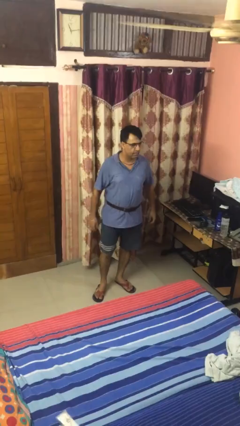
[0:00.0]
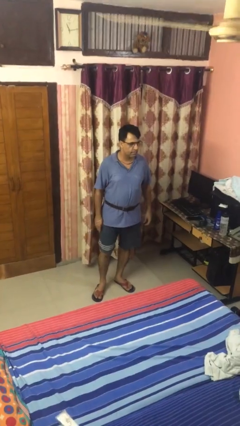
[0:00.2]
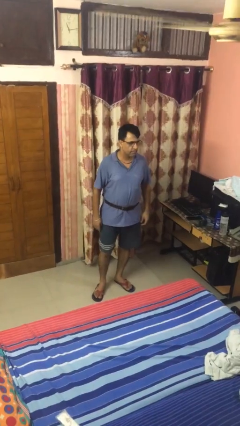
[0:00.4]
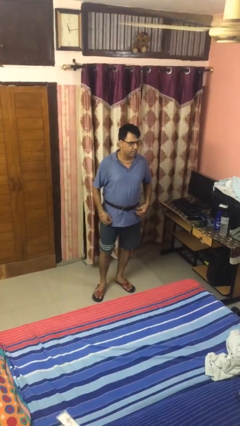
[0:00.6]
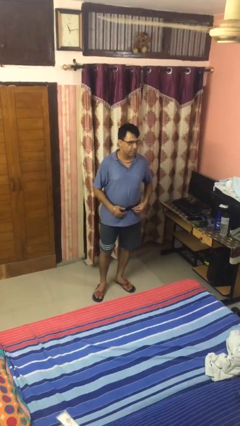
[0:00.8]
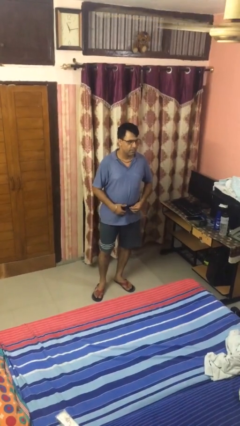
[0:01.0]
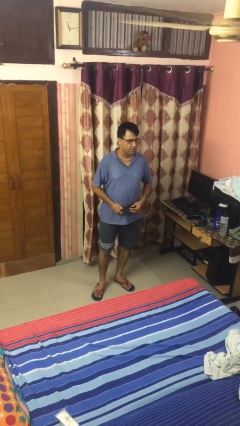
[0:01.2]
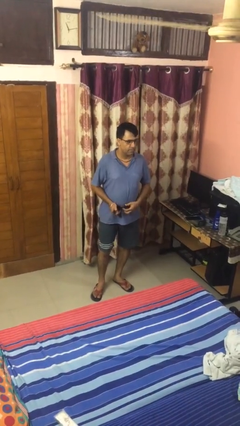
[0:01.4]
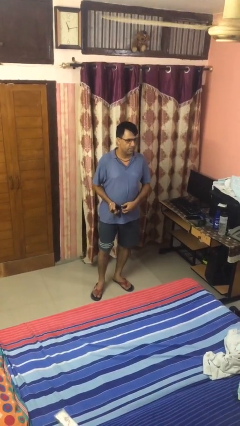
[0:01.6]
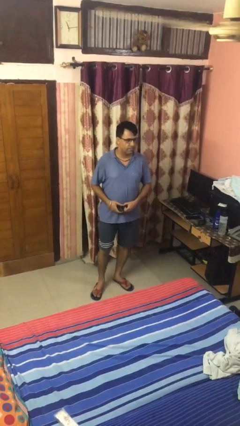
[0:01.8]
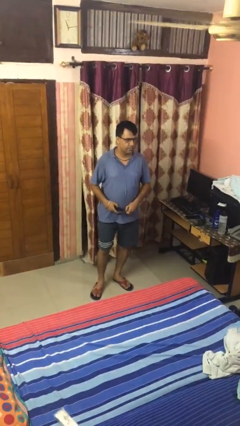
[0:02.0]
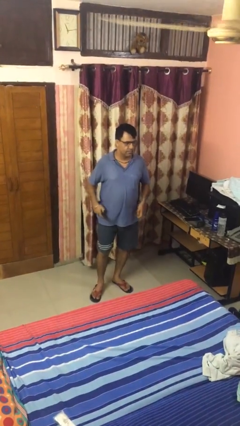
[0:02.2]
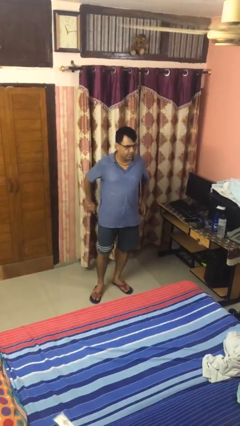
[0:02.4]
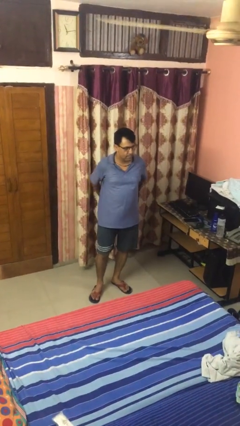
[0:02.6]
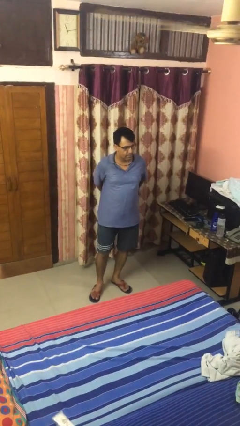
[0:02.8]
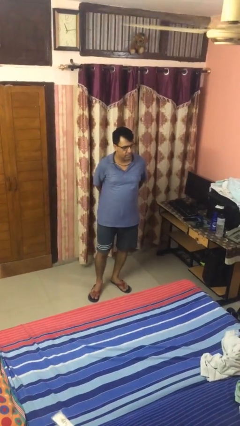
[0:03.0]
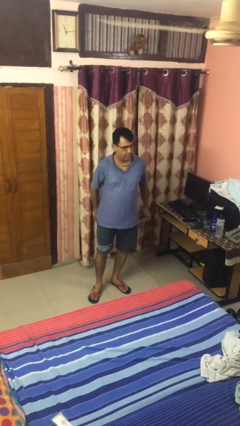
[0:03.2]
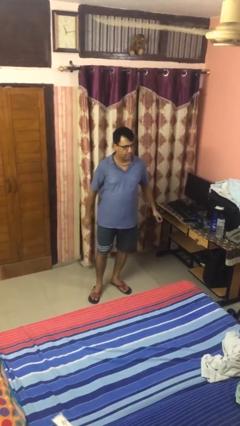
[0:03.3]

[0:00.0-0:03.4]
person takes off belt

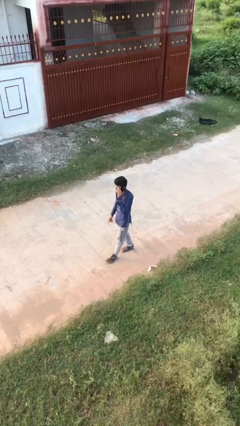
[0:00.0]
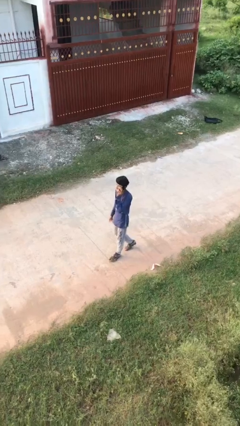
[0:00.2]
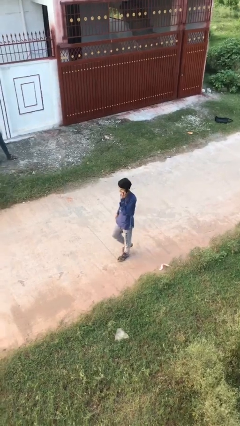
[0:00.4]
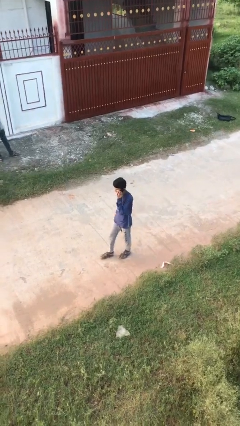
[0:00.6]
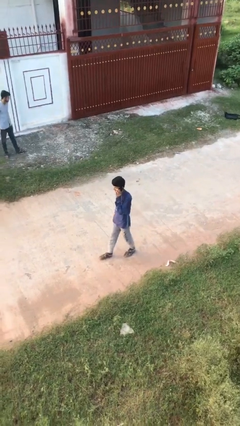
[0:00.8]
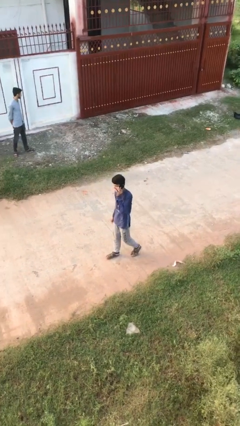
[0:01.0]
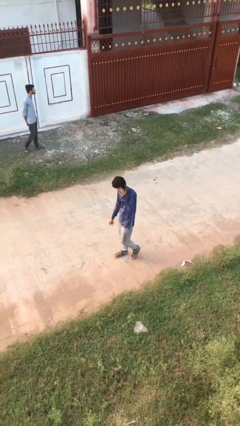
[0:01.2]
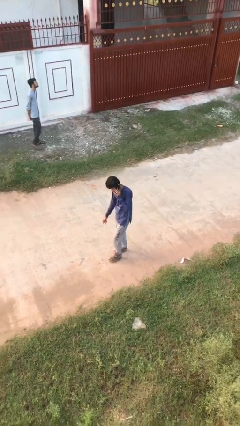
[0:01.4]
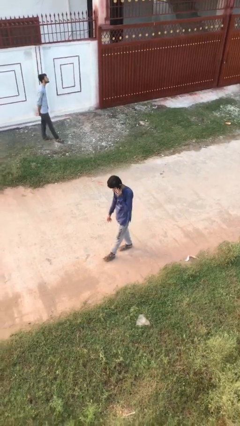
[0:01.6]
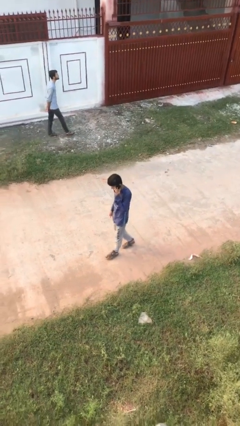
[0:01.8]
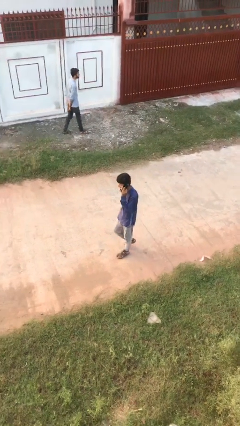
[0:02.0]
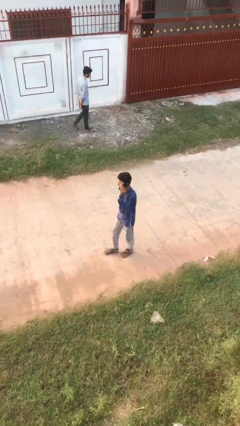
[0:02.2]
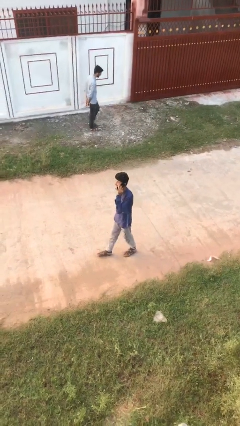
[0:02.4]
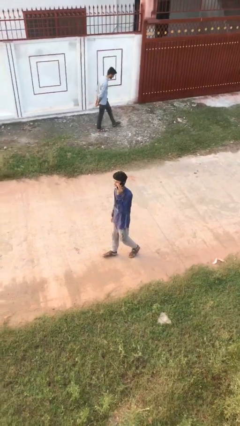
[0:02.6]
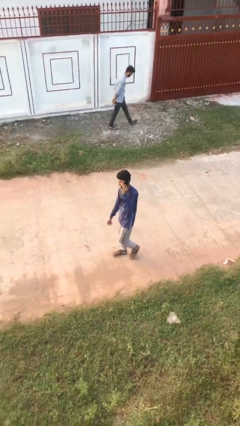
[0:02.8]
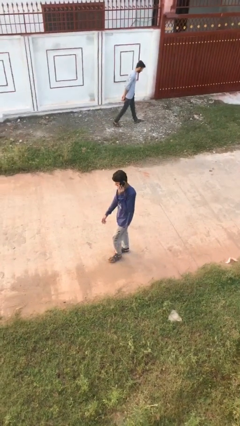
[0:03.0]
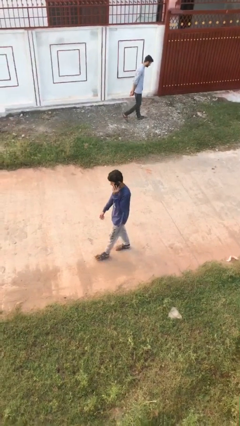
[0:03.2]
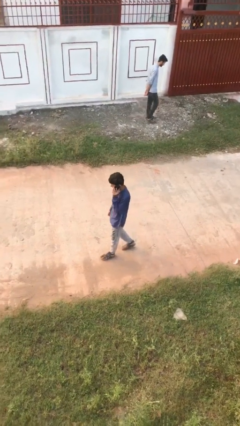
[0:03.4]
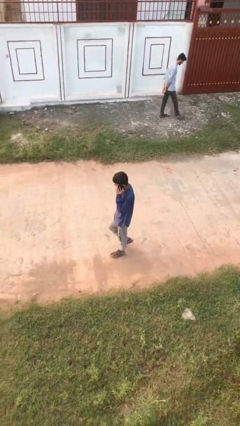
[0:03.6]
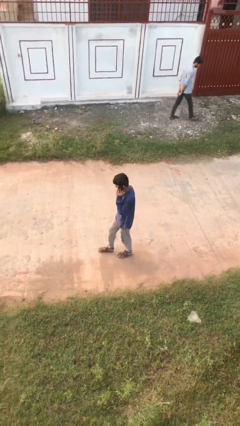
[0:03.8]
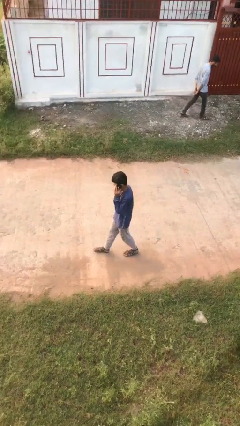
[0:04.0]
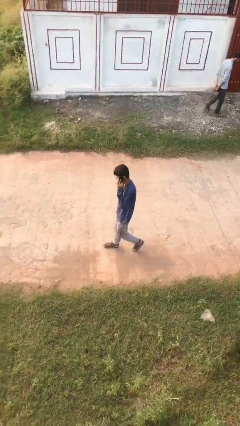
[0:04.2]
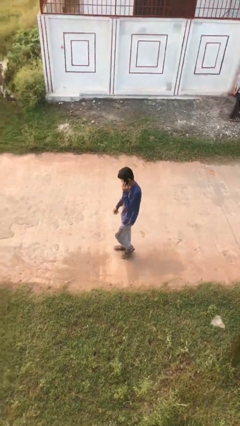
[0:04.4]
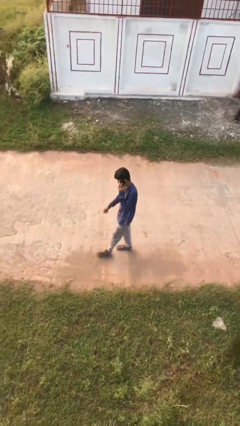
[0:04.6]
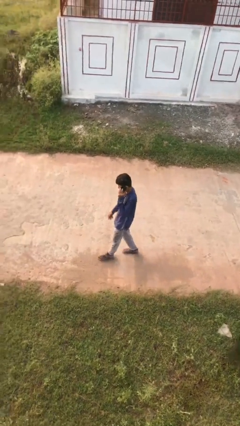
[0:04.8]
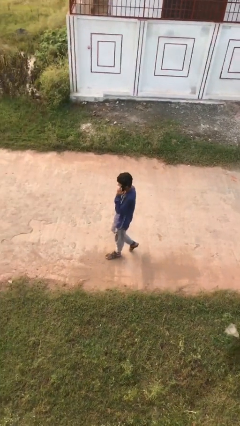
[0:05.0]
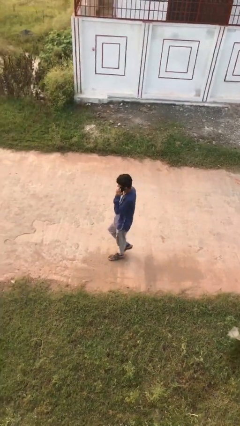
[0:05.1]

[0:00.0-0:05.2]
person talks on phone

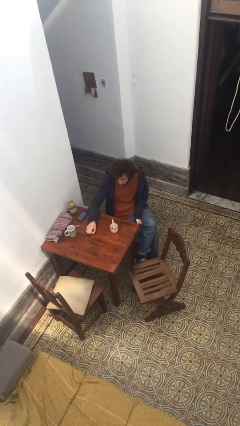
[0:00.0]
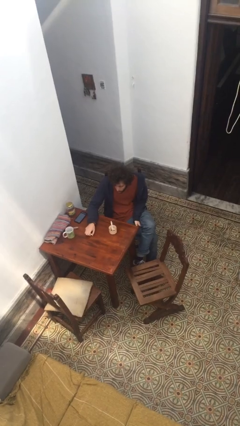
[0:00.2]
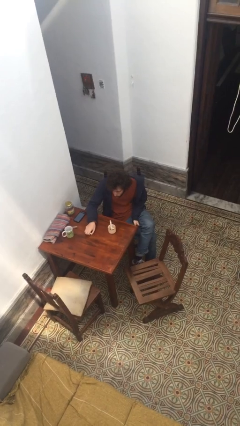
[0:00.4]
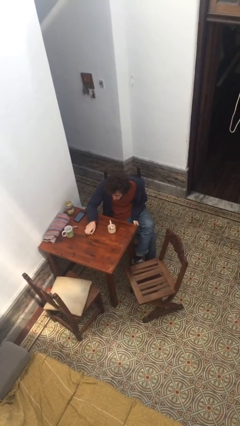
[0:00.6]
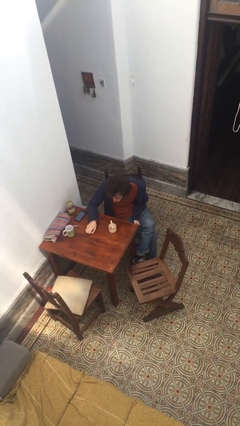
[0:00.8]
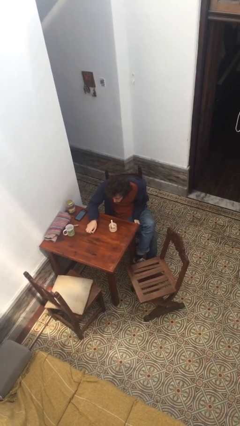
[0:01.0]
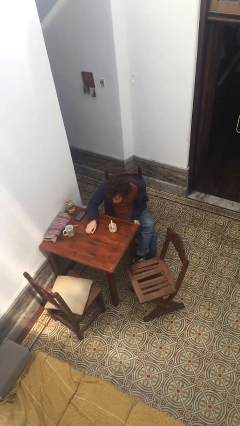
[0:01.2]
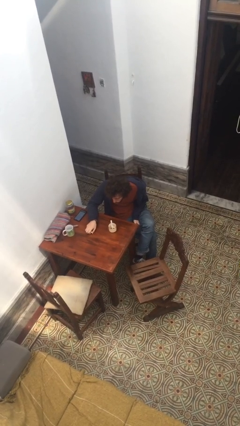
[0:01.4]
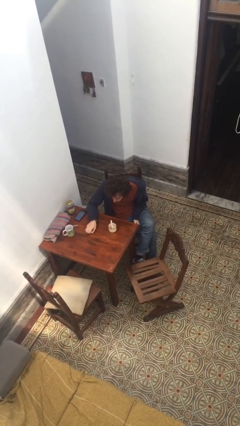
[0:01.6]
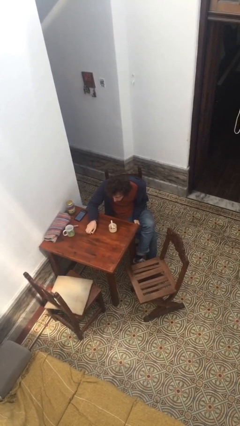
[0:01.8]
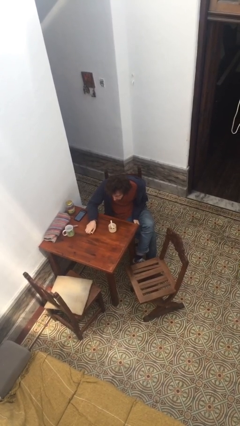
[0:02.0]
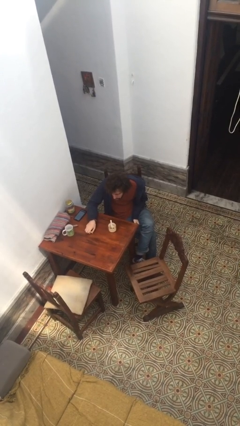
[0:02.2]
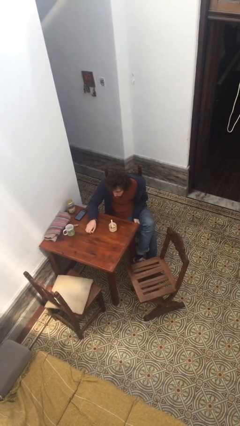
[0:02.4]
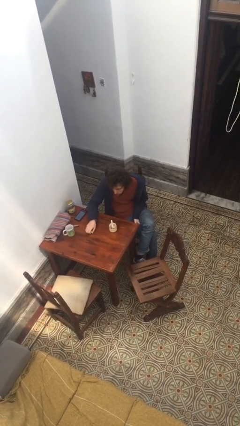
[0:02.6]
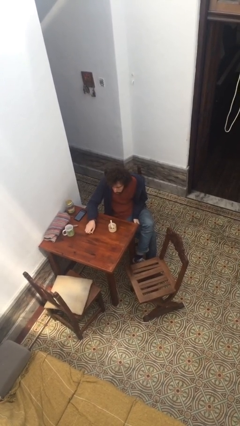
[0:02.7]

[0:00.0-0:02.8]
person extinguishes candle

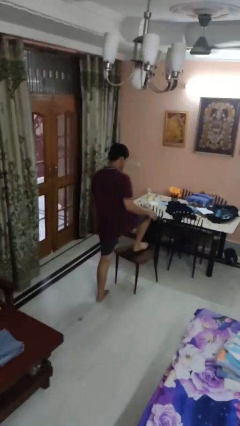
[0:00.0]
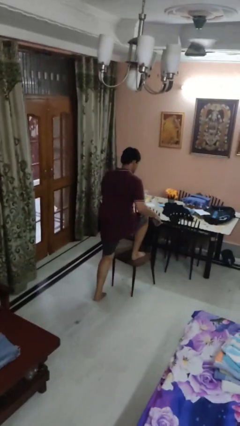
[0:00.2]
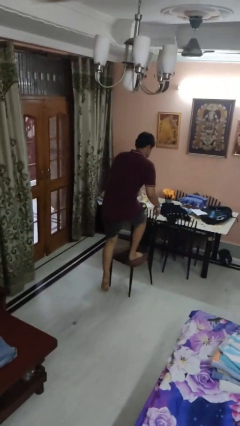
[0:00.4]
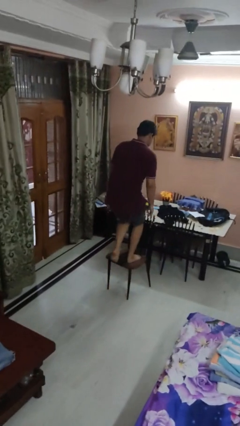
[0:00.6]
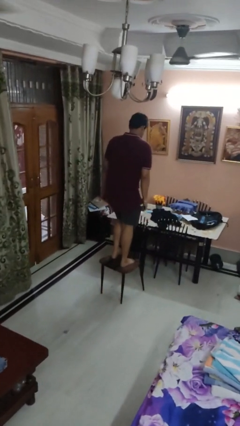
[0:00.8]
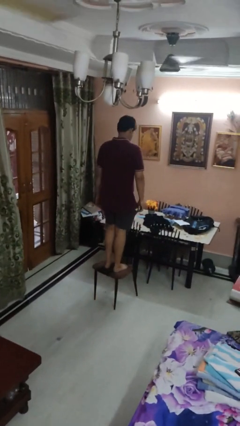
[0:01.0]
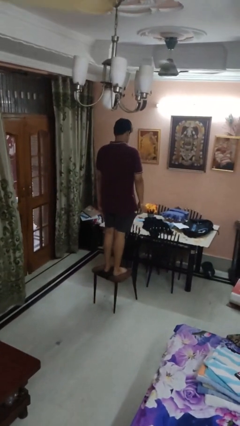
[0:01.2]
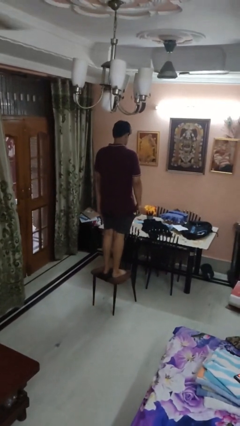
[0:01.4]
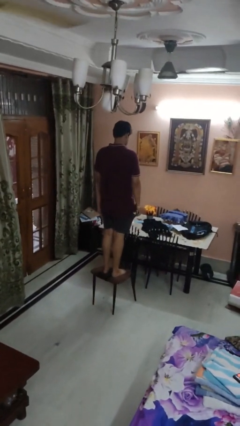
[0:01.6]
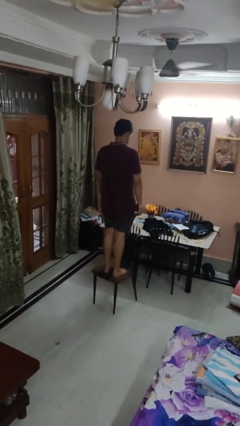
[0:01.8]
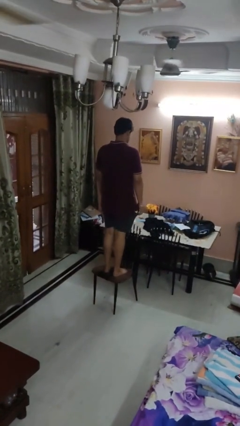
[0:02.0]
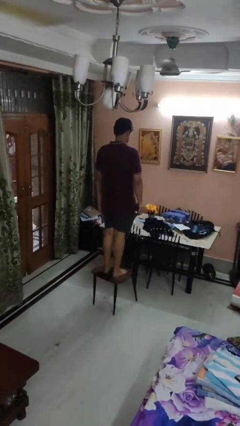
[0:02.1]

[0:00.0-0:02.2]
person climbs on chair

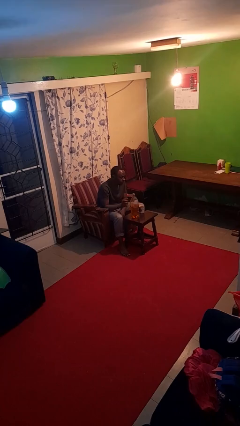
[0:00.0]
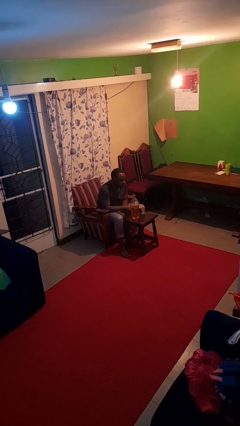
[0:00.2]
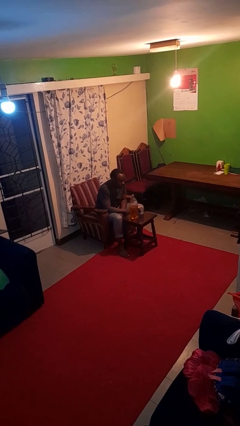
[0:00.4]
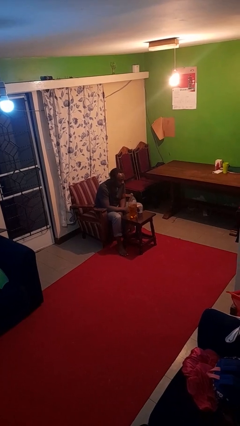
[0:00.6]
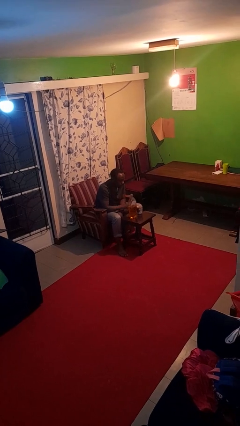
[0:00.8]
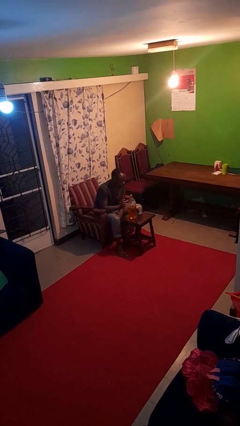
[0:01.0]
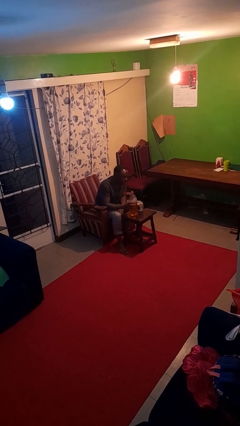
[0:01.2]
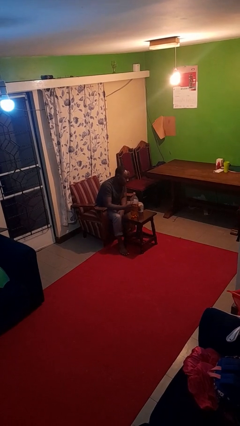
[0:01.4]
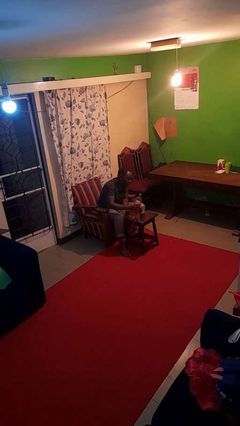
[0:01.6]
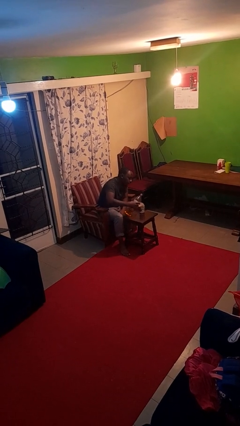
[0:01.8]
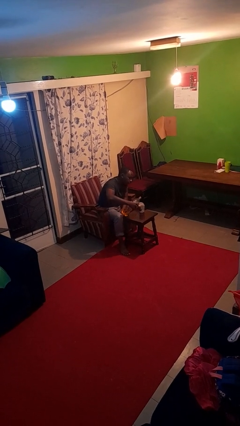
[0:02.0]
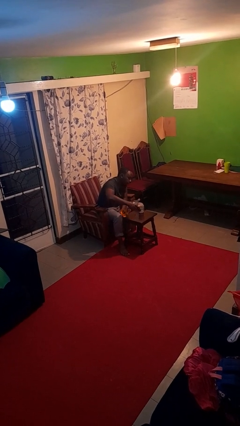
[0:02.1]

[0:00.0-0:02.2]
person pours liquid into cup

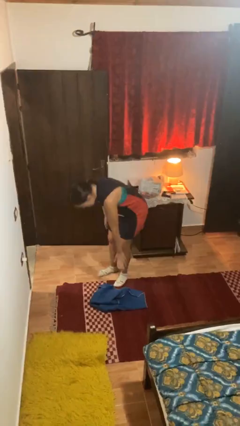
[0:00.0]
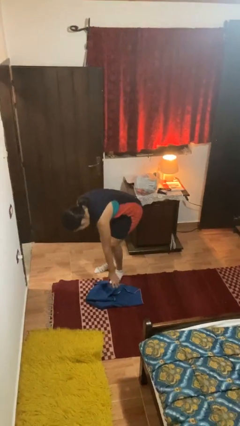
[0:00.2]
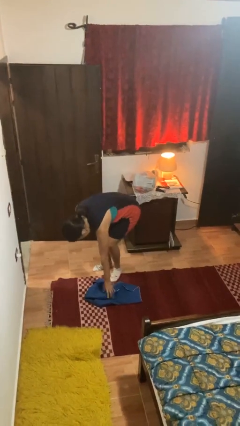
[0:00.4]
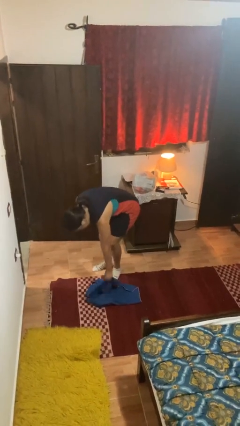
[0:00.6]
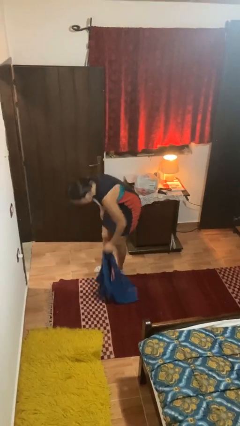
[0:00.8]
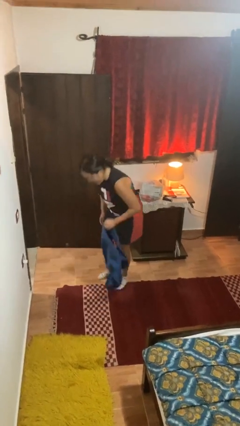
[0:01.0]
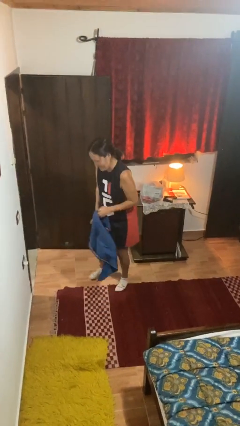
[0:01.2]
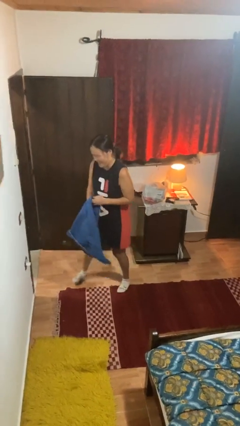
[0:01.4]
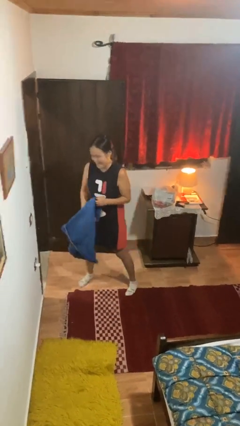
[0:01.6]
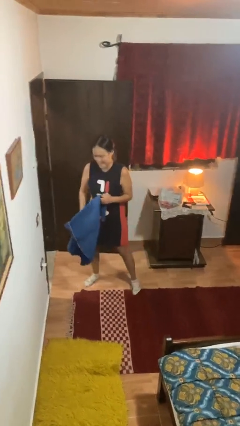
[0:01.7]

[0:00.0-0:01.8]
person picks up object from floor
